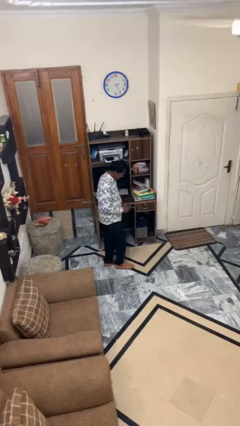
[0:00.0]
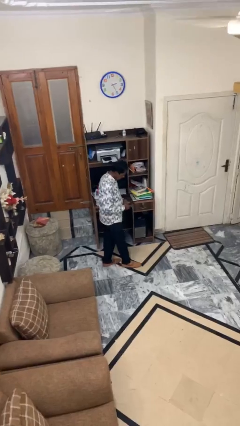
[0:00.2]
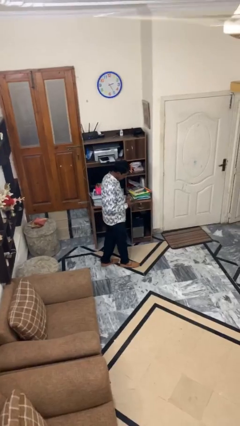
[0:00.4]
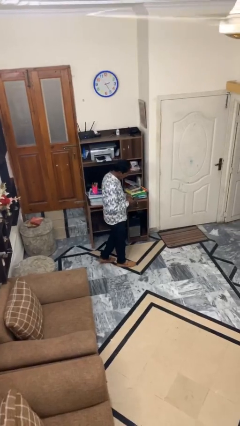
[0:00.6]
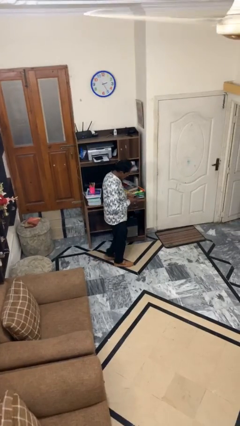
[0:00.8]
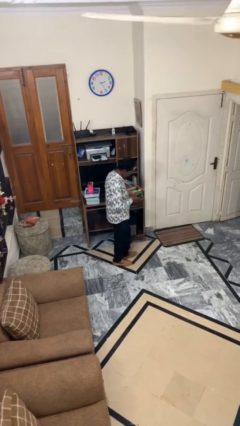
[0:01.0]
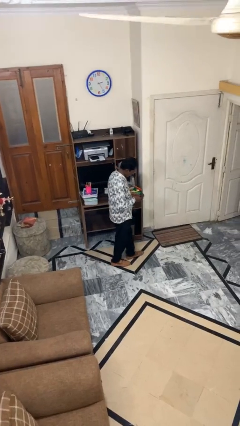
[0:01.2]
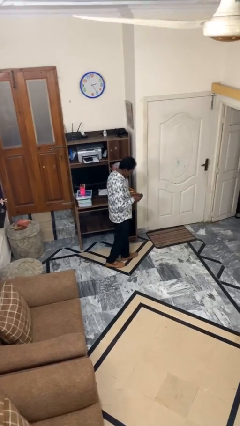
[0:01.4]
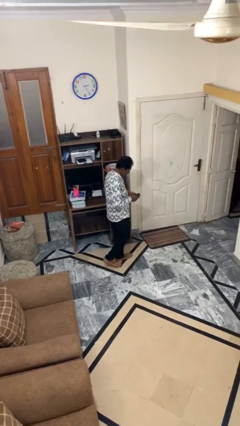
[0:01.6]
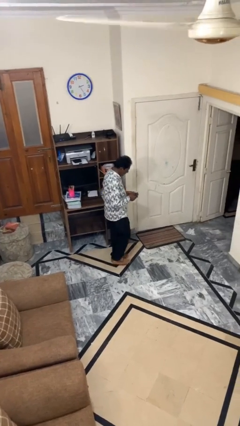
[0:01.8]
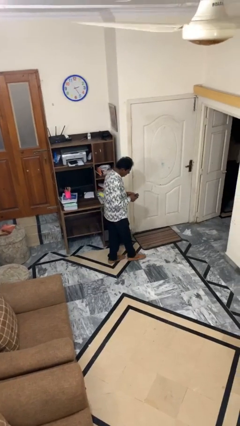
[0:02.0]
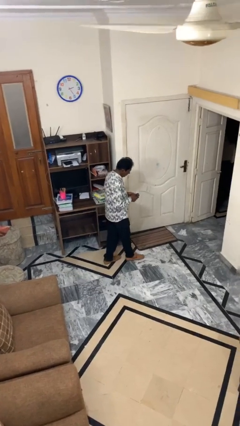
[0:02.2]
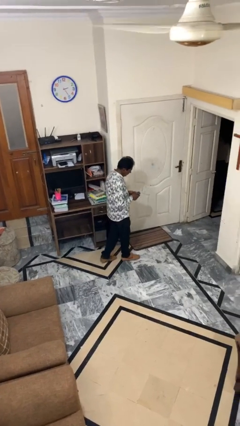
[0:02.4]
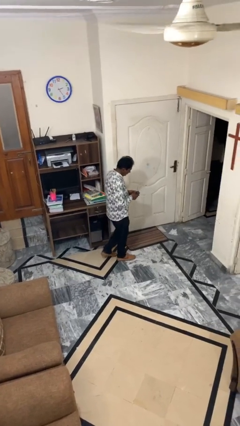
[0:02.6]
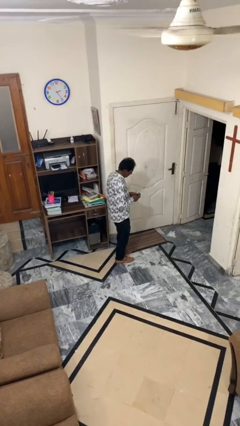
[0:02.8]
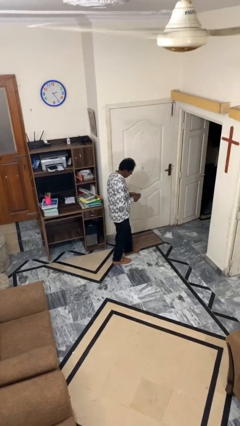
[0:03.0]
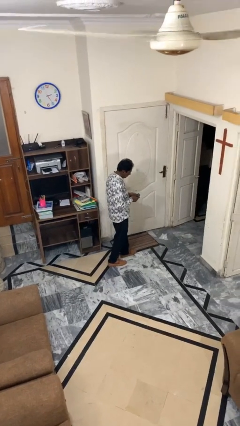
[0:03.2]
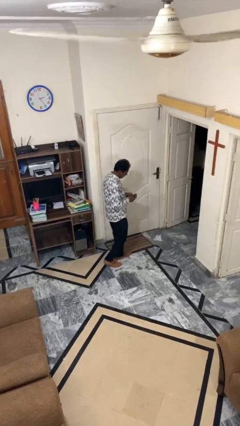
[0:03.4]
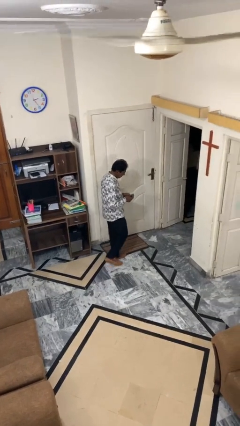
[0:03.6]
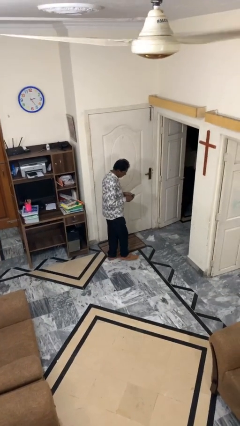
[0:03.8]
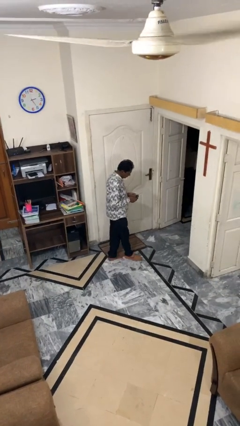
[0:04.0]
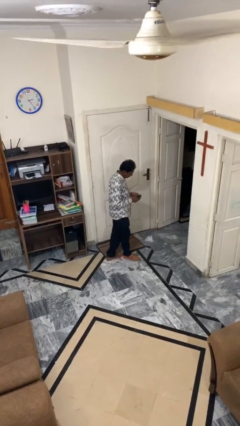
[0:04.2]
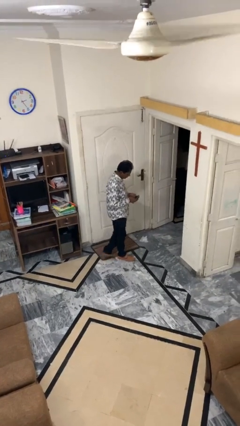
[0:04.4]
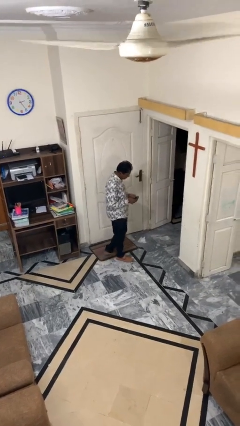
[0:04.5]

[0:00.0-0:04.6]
person texts on phone

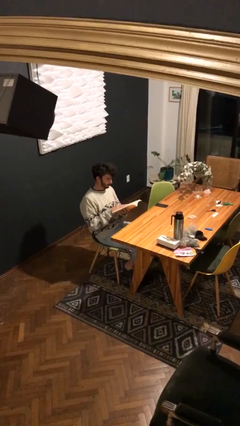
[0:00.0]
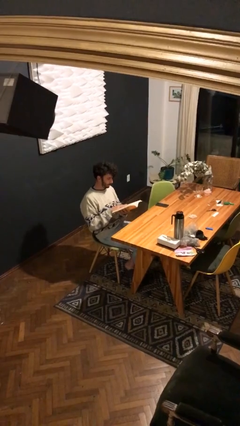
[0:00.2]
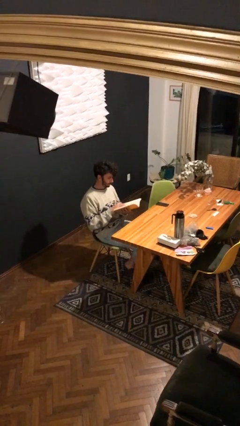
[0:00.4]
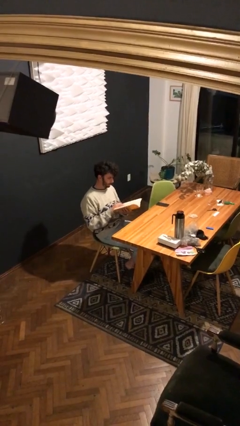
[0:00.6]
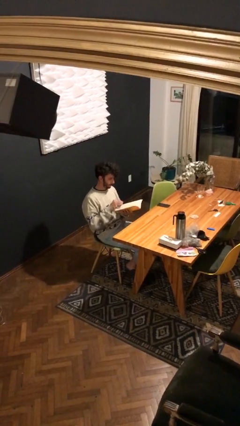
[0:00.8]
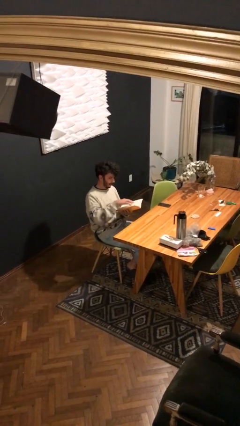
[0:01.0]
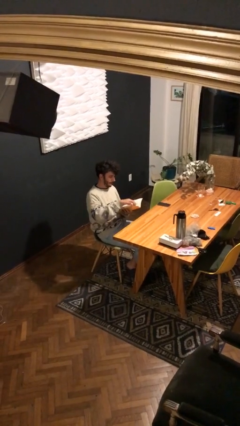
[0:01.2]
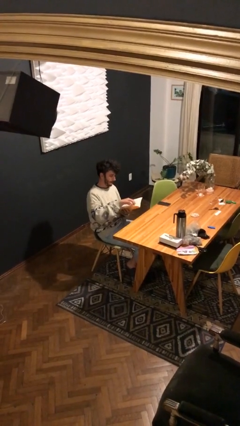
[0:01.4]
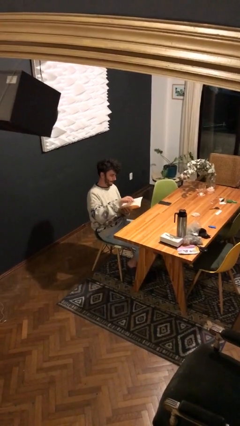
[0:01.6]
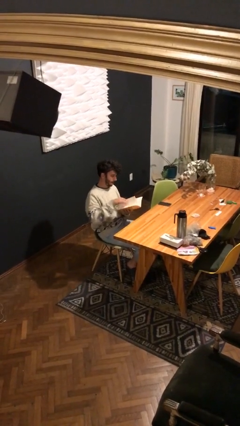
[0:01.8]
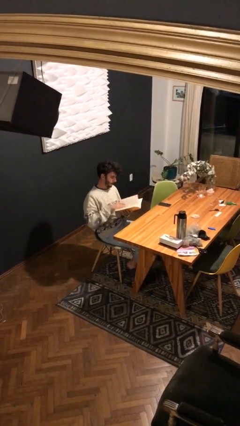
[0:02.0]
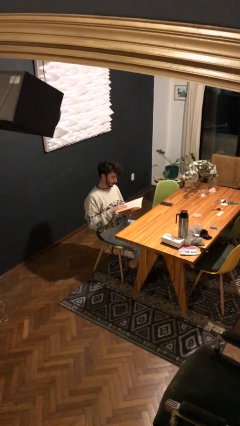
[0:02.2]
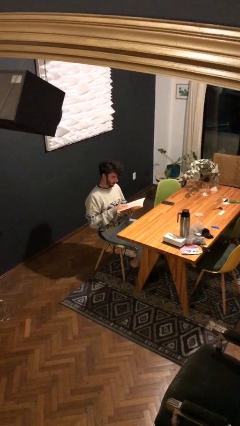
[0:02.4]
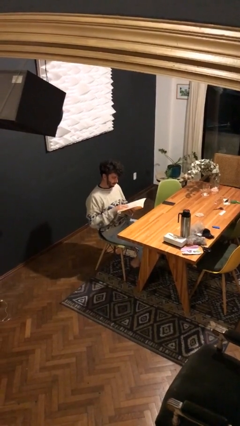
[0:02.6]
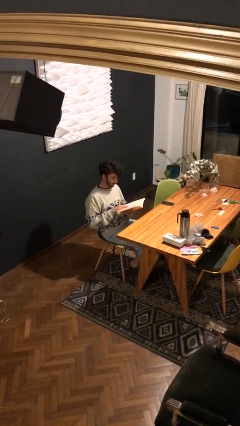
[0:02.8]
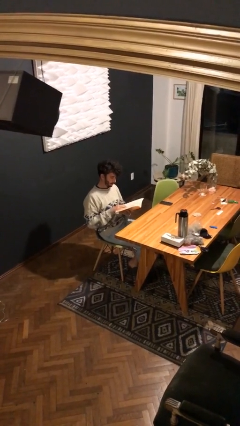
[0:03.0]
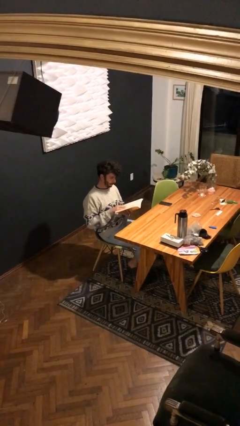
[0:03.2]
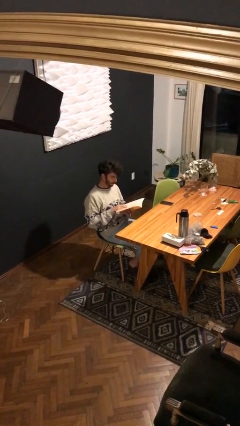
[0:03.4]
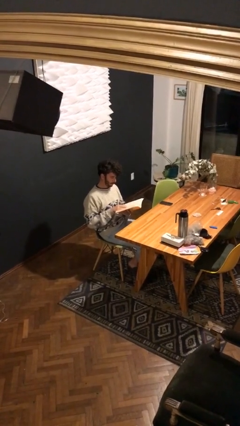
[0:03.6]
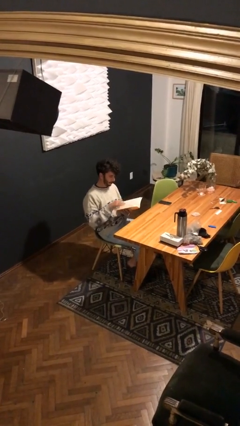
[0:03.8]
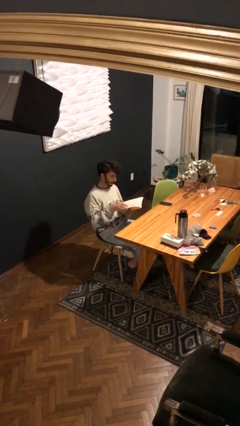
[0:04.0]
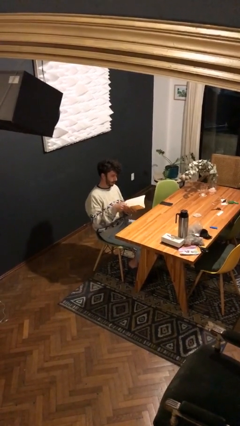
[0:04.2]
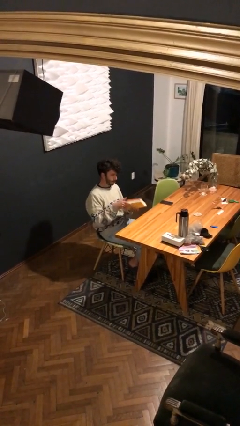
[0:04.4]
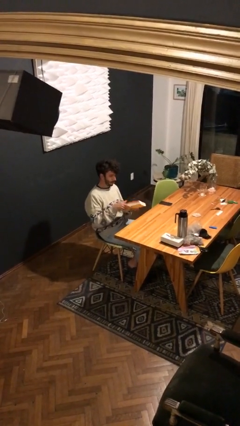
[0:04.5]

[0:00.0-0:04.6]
person reads document

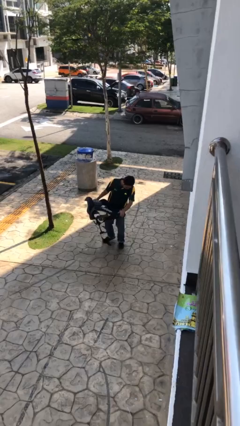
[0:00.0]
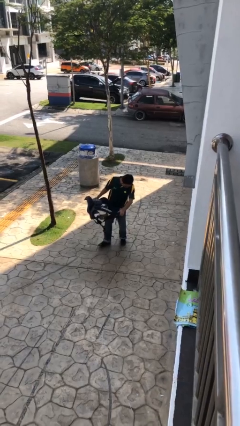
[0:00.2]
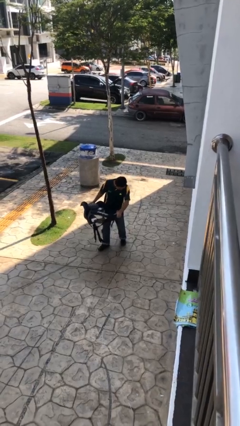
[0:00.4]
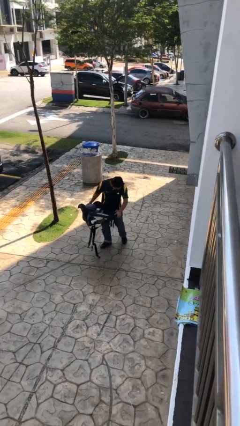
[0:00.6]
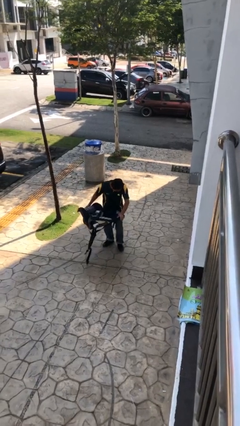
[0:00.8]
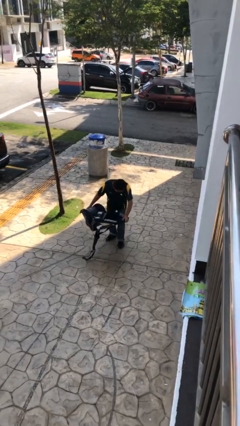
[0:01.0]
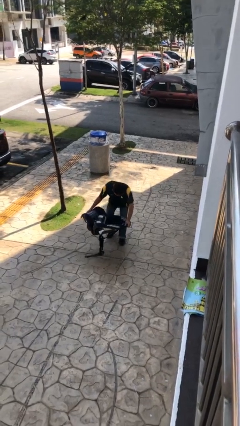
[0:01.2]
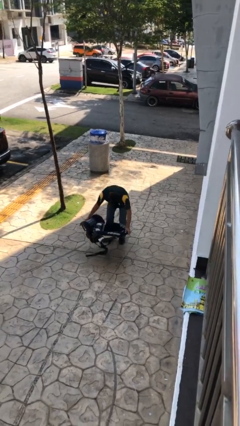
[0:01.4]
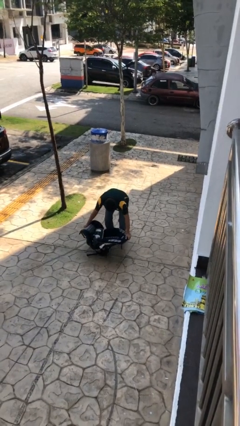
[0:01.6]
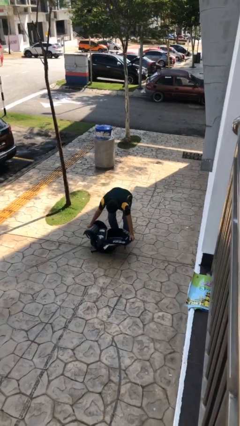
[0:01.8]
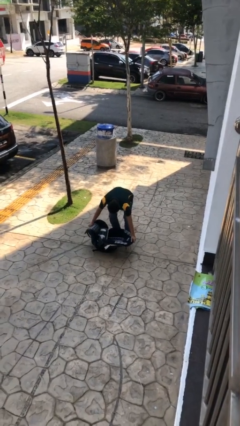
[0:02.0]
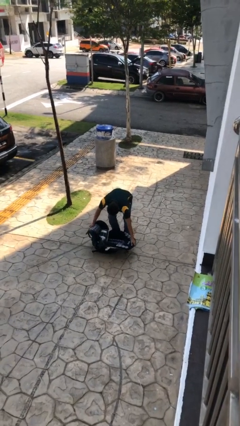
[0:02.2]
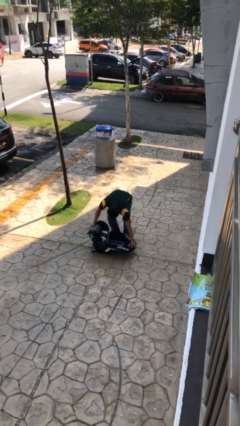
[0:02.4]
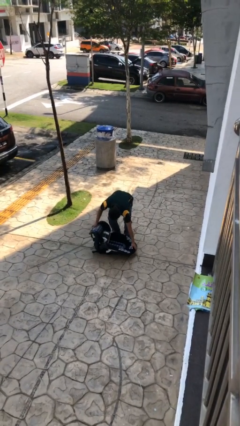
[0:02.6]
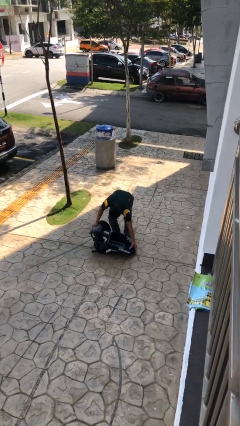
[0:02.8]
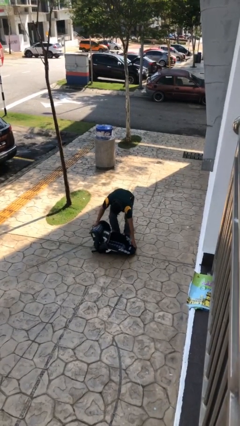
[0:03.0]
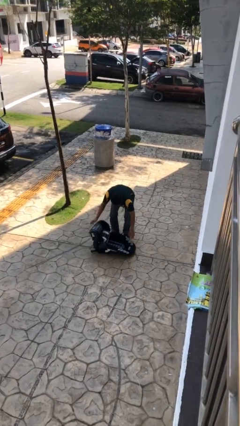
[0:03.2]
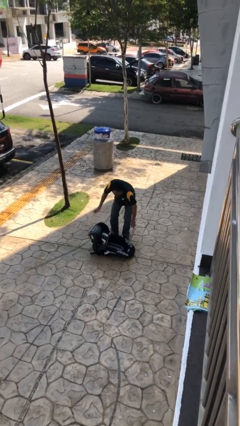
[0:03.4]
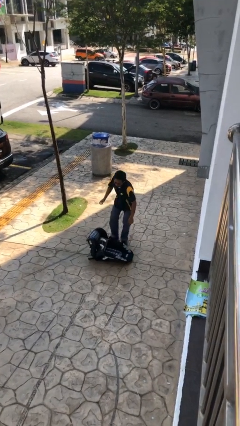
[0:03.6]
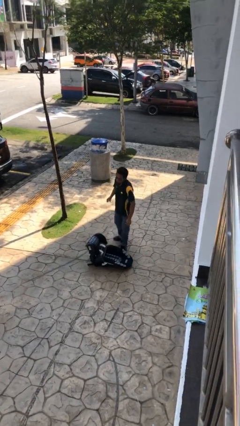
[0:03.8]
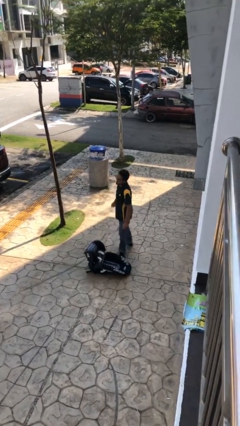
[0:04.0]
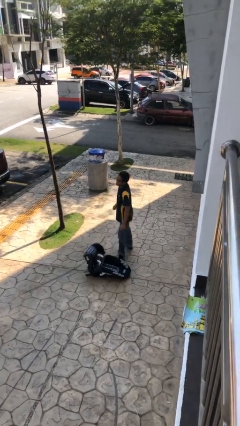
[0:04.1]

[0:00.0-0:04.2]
person puts down object on floor

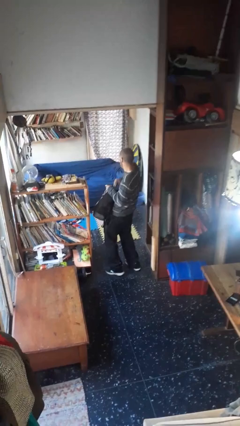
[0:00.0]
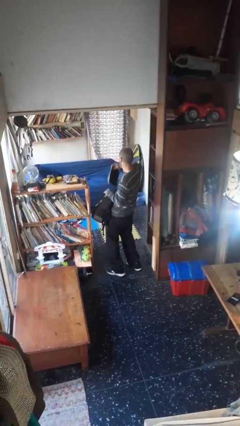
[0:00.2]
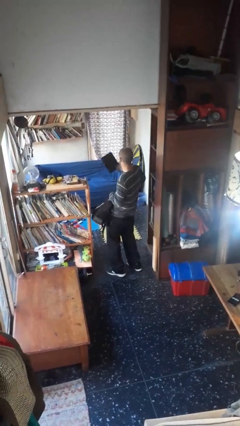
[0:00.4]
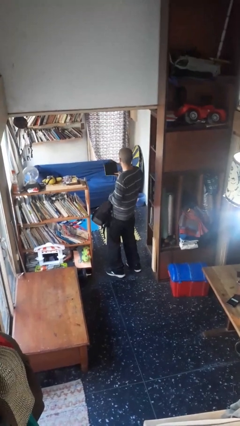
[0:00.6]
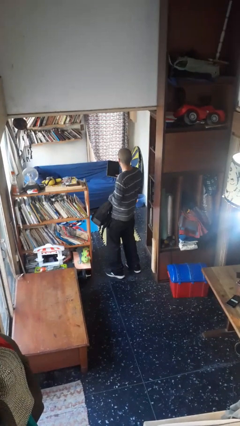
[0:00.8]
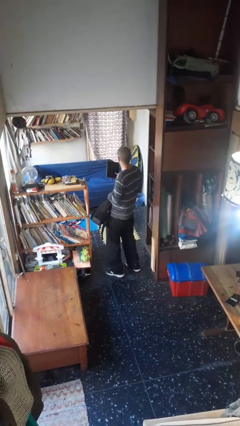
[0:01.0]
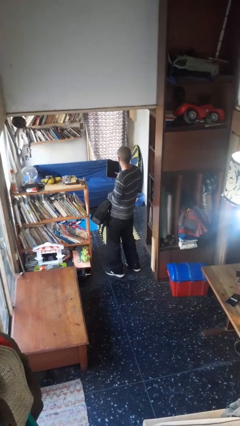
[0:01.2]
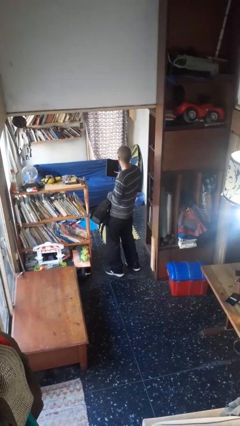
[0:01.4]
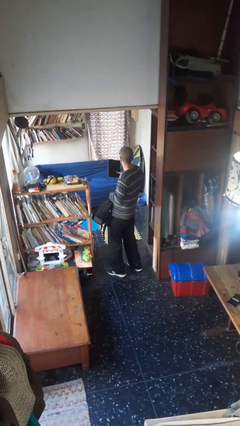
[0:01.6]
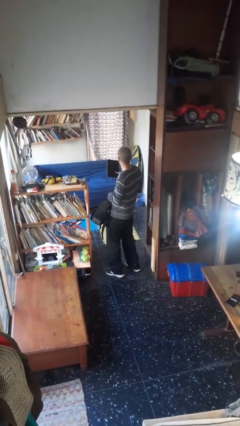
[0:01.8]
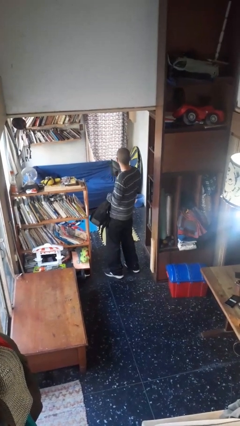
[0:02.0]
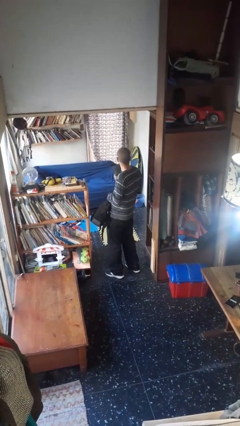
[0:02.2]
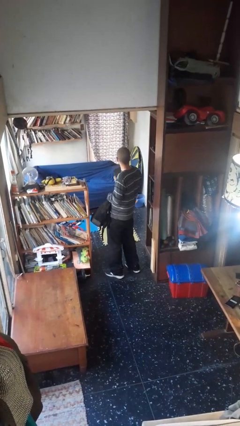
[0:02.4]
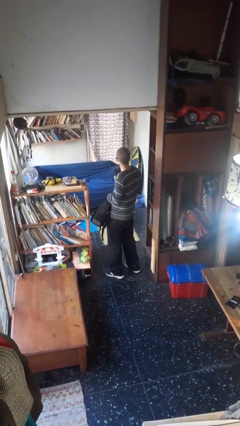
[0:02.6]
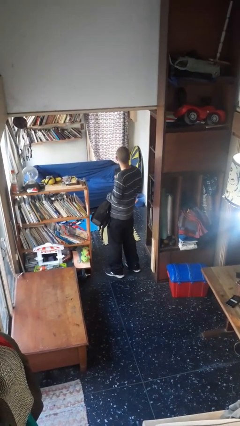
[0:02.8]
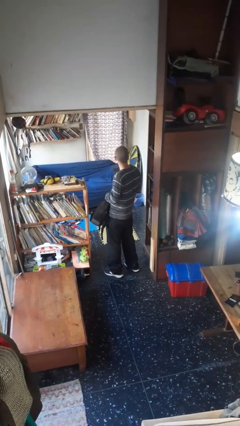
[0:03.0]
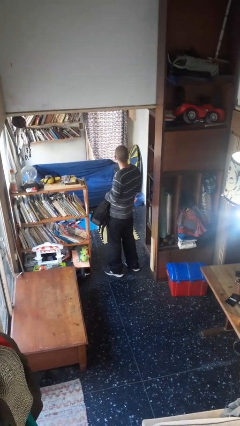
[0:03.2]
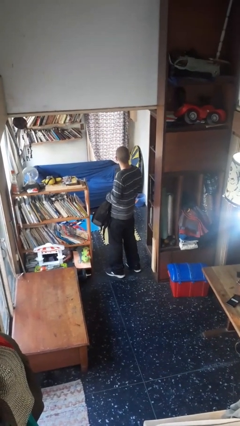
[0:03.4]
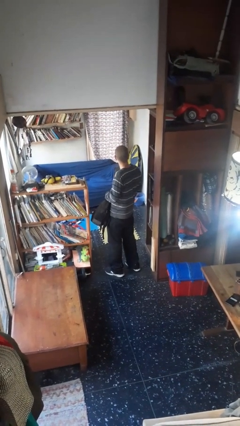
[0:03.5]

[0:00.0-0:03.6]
person takes object from backpack

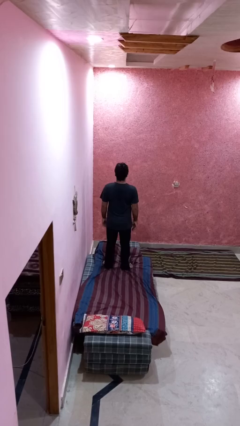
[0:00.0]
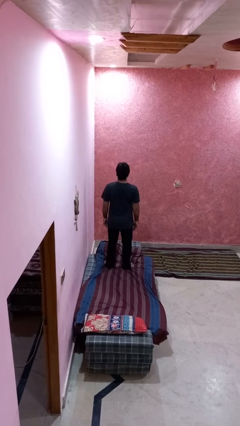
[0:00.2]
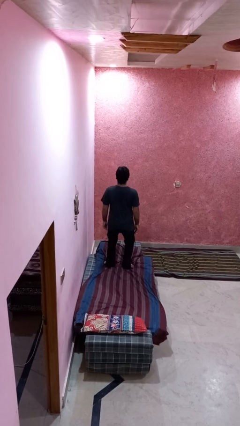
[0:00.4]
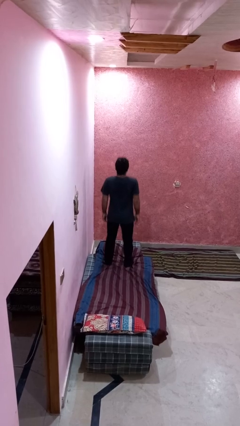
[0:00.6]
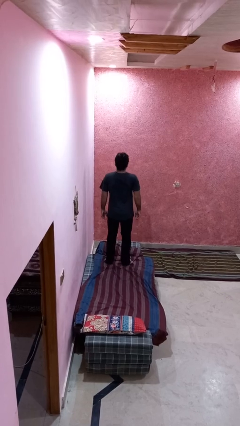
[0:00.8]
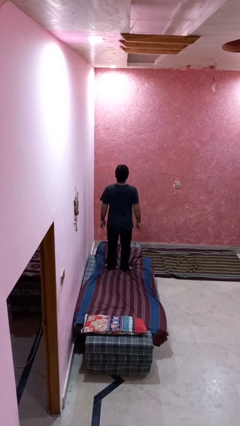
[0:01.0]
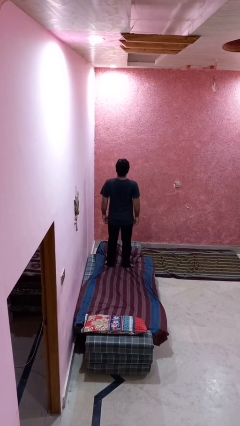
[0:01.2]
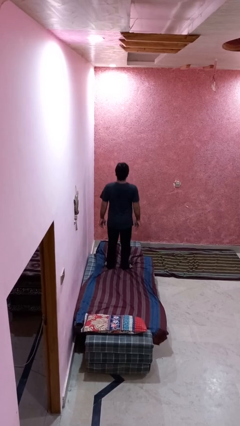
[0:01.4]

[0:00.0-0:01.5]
person jumps on bed
